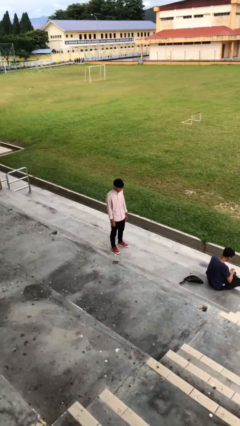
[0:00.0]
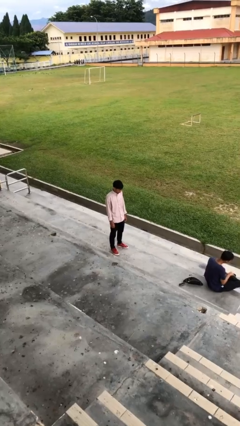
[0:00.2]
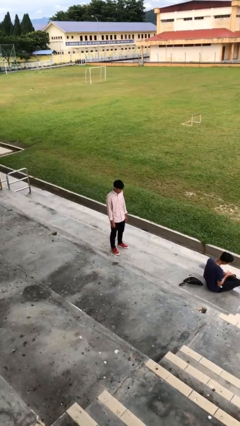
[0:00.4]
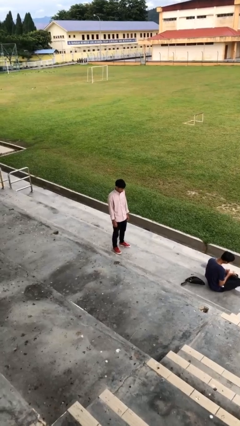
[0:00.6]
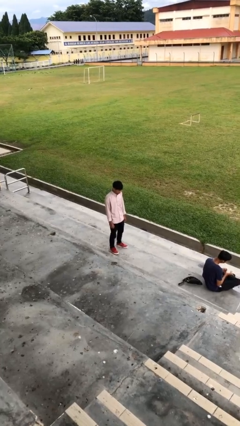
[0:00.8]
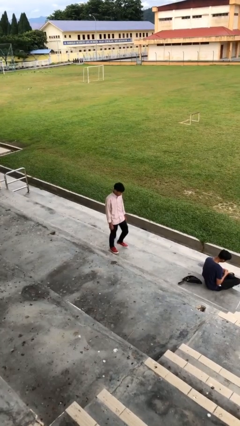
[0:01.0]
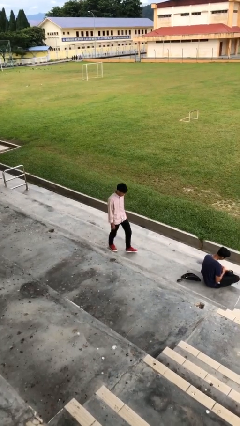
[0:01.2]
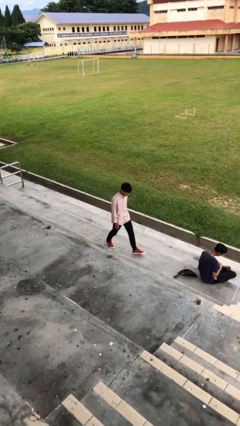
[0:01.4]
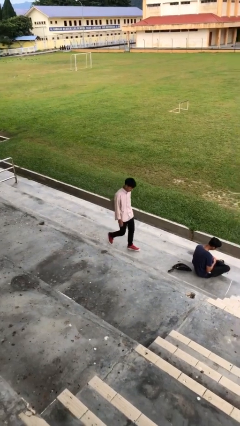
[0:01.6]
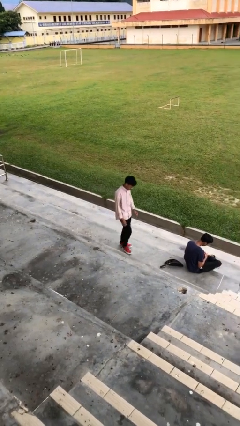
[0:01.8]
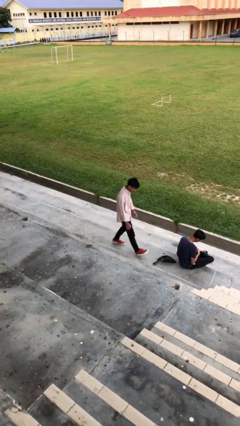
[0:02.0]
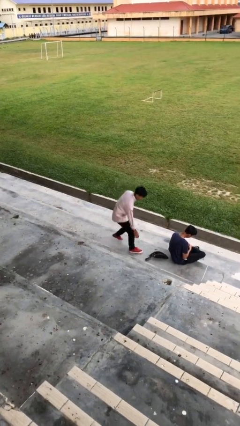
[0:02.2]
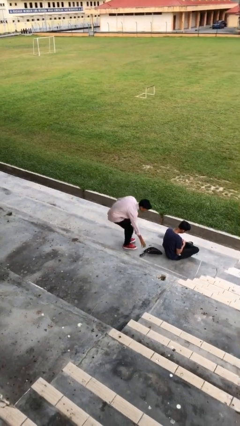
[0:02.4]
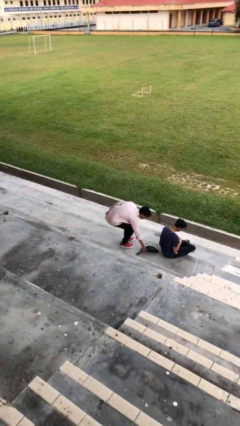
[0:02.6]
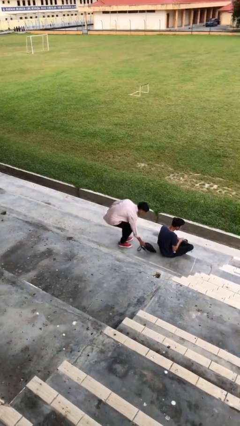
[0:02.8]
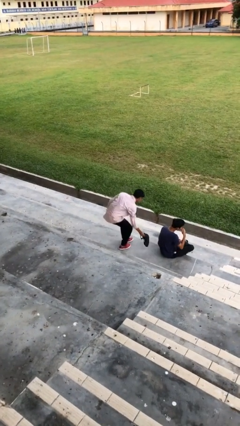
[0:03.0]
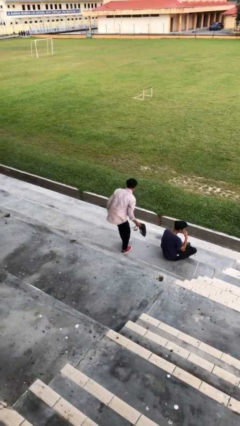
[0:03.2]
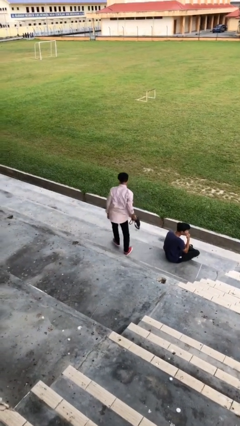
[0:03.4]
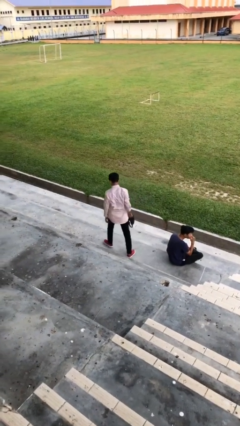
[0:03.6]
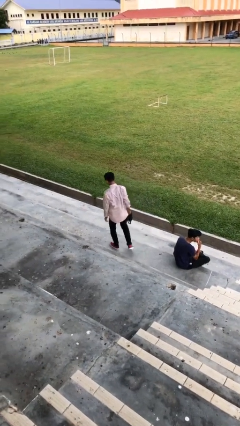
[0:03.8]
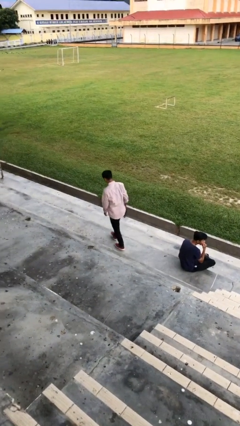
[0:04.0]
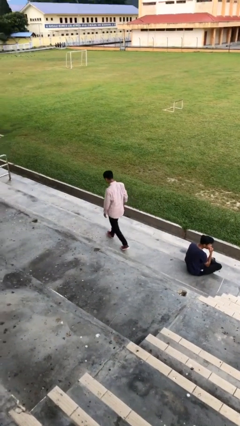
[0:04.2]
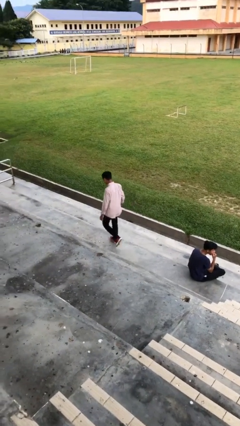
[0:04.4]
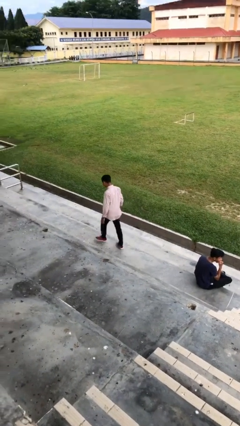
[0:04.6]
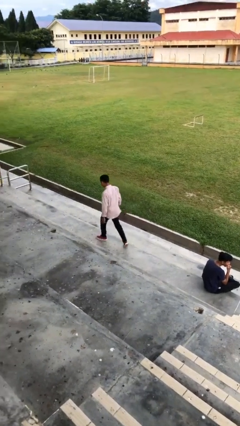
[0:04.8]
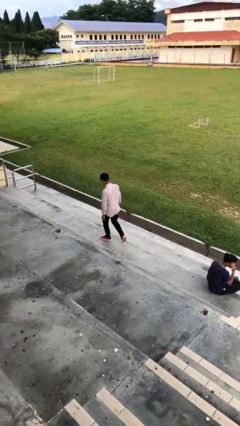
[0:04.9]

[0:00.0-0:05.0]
person steals object from person

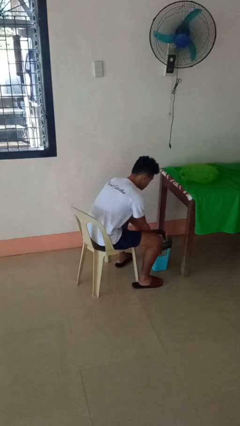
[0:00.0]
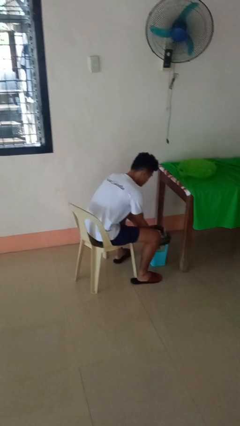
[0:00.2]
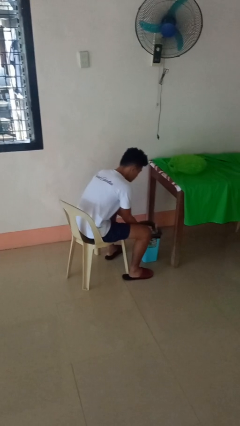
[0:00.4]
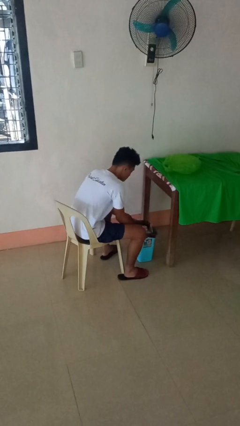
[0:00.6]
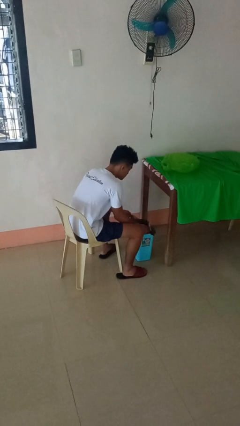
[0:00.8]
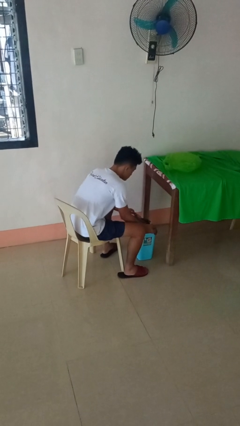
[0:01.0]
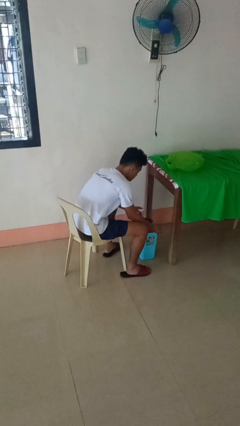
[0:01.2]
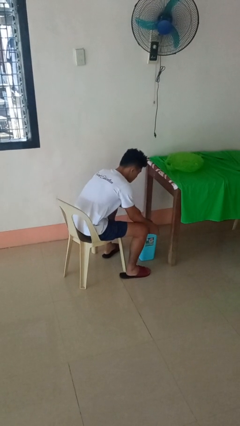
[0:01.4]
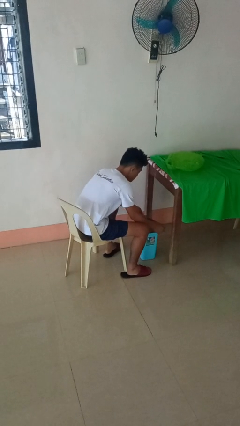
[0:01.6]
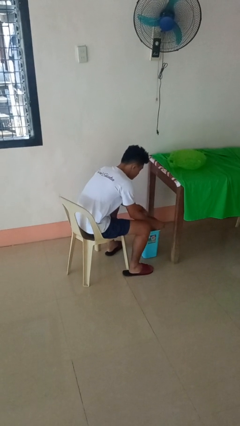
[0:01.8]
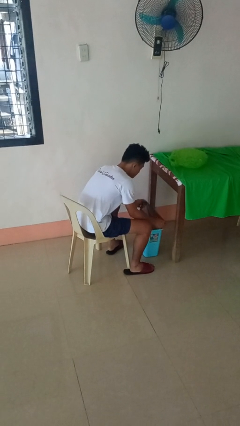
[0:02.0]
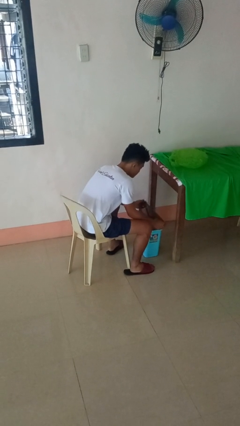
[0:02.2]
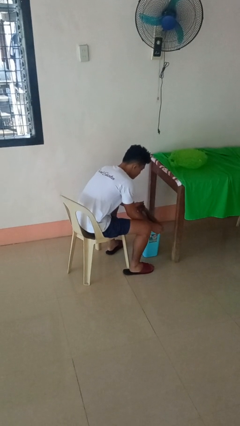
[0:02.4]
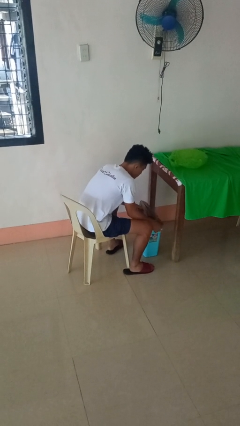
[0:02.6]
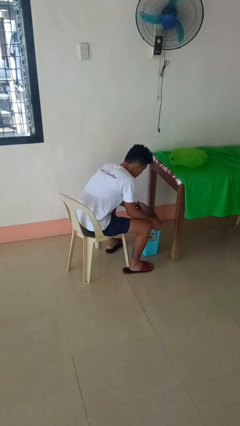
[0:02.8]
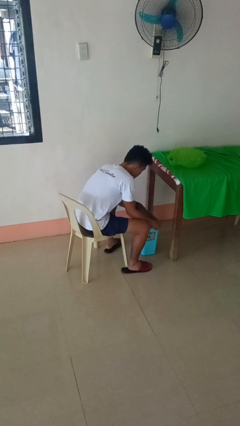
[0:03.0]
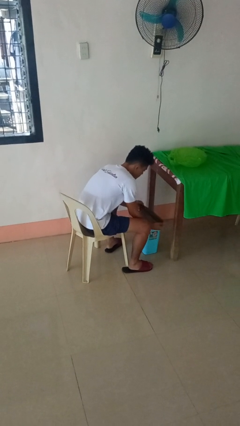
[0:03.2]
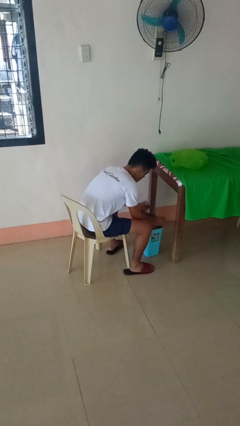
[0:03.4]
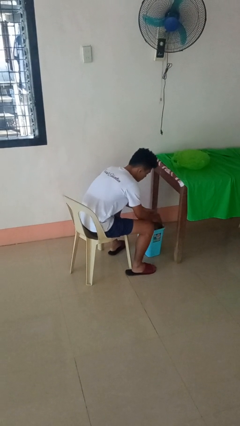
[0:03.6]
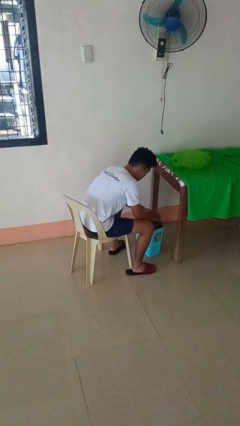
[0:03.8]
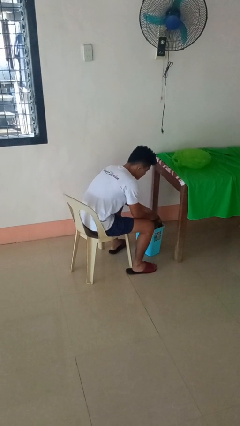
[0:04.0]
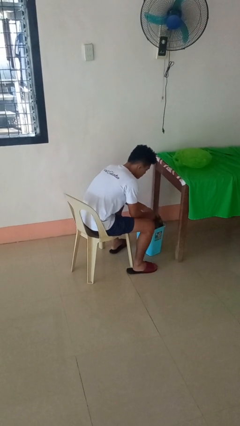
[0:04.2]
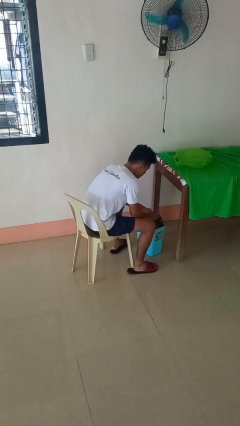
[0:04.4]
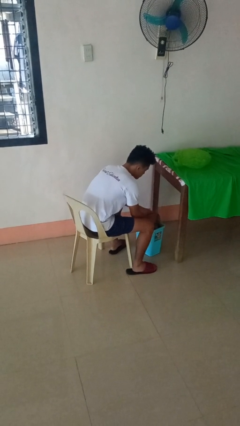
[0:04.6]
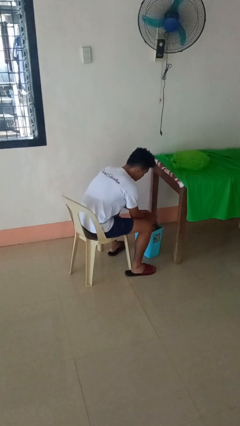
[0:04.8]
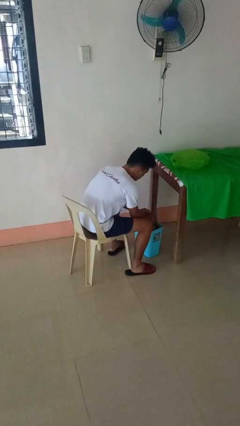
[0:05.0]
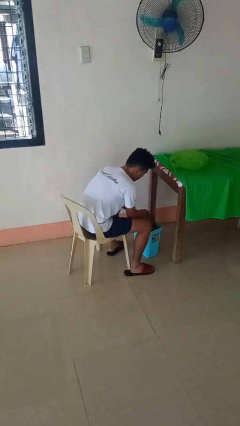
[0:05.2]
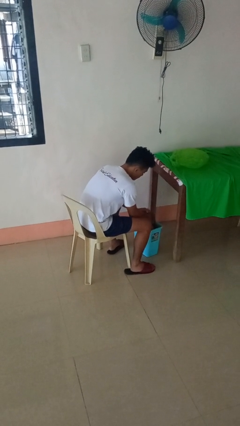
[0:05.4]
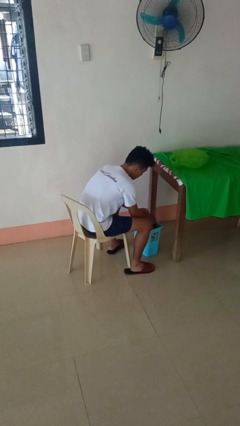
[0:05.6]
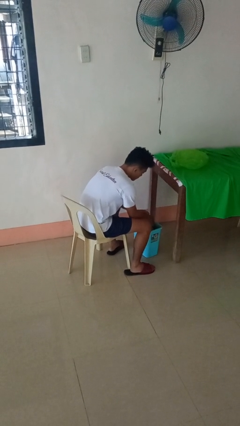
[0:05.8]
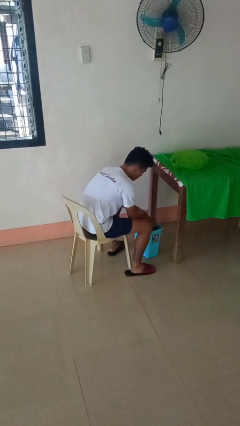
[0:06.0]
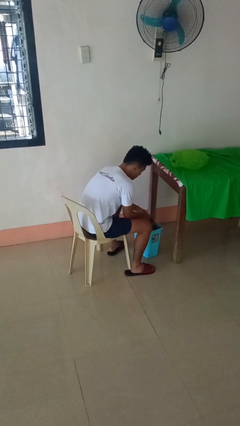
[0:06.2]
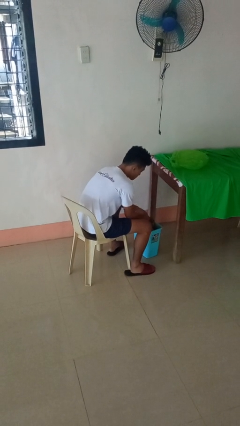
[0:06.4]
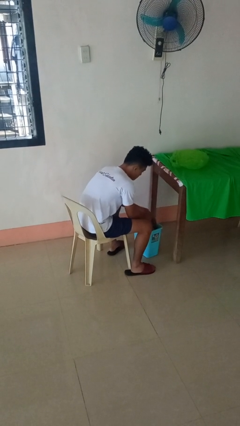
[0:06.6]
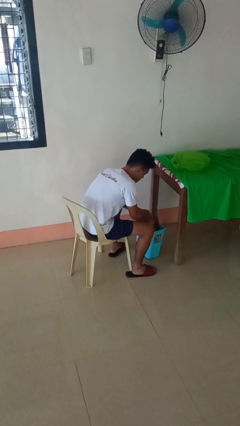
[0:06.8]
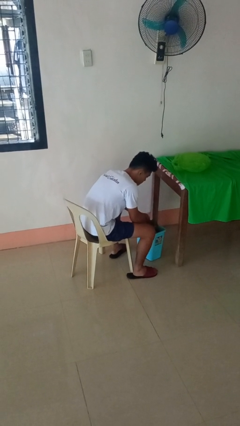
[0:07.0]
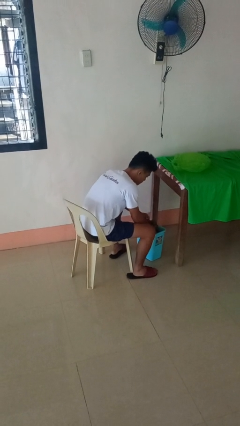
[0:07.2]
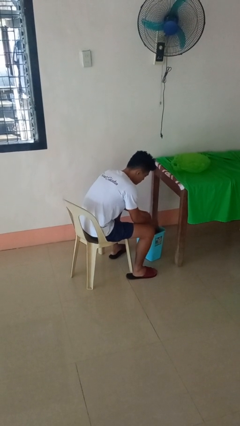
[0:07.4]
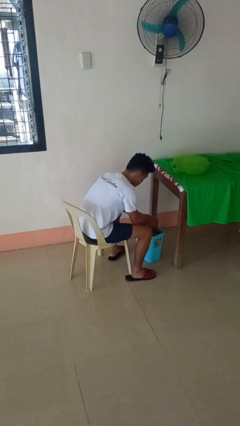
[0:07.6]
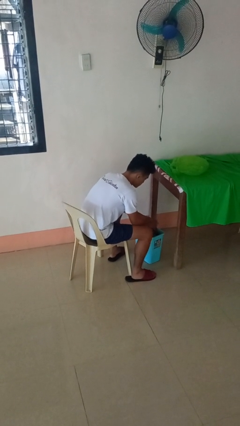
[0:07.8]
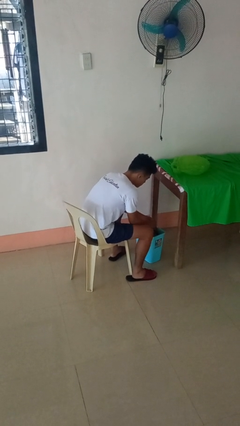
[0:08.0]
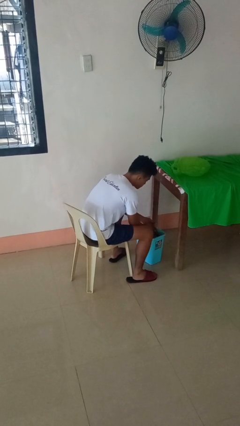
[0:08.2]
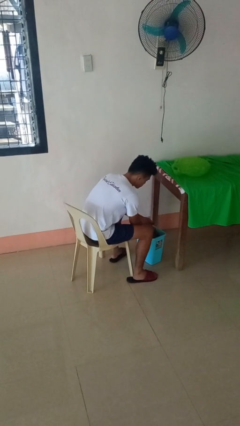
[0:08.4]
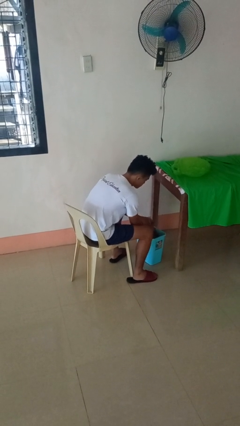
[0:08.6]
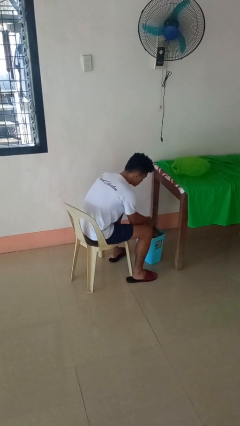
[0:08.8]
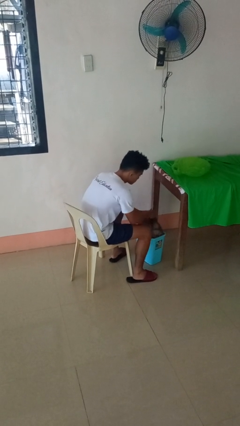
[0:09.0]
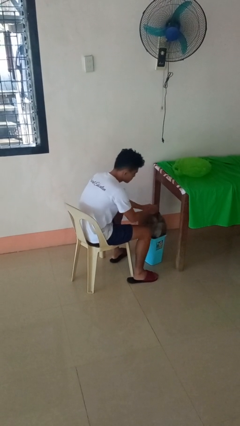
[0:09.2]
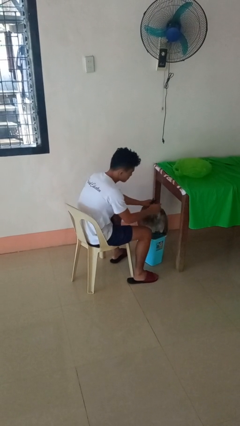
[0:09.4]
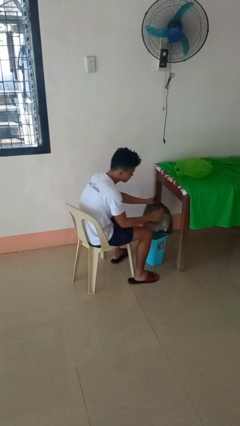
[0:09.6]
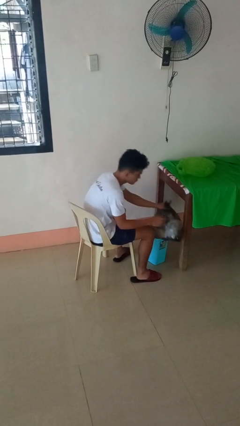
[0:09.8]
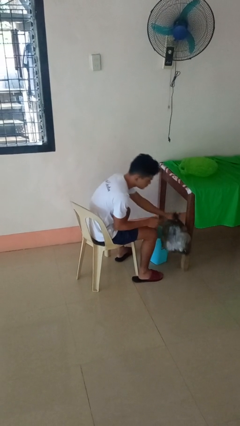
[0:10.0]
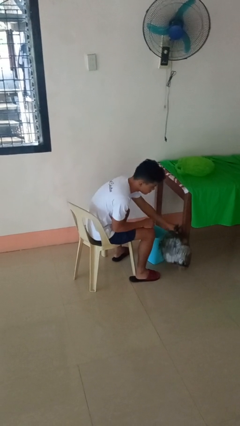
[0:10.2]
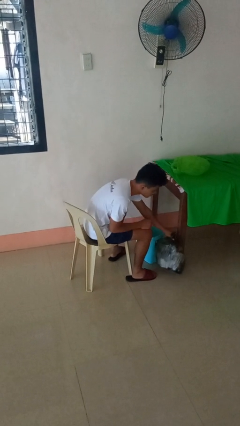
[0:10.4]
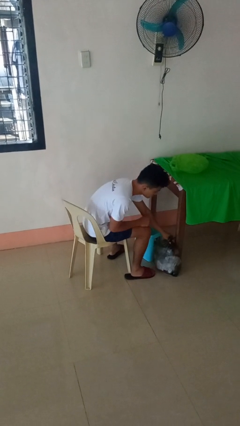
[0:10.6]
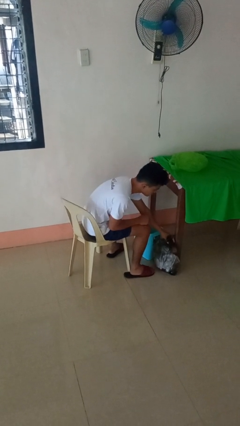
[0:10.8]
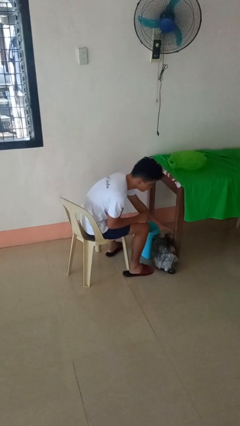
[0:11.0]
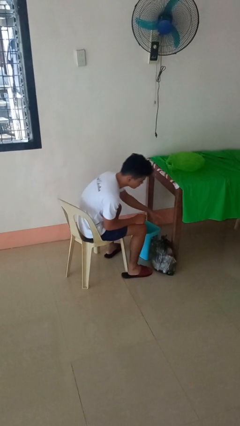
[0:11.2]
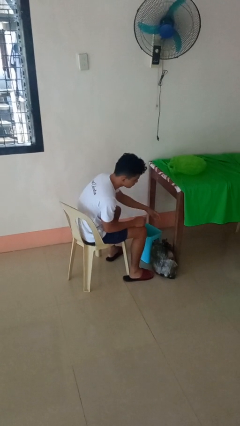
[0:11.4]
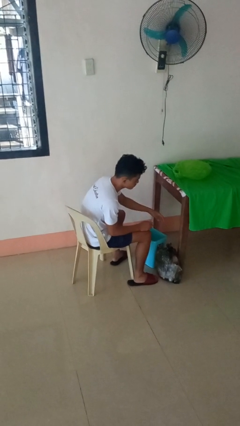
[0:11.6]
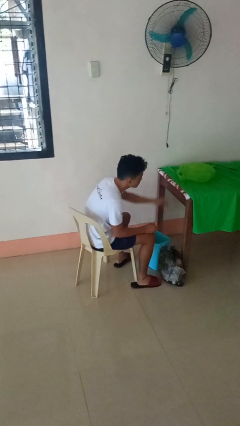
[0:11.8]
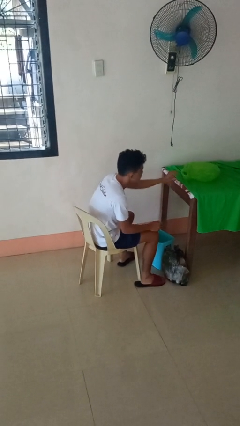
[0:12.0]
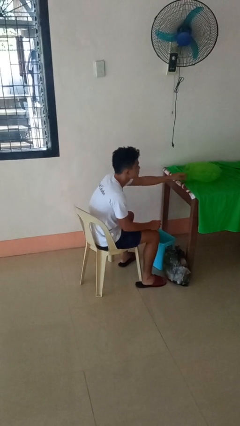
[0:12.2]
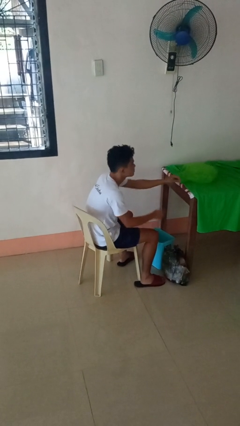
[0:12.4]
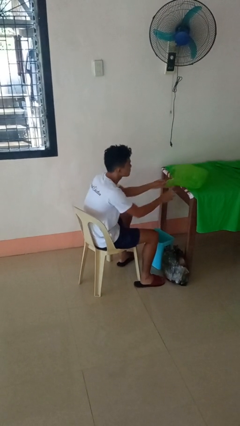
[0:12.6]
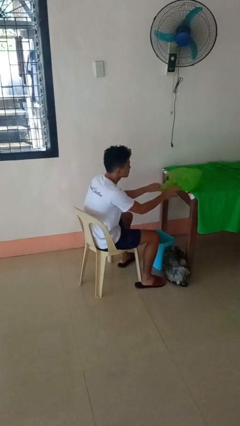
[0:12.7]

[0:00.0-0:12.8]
person removes trashbag from trashcan

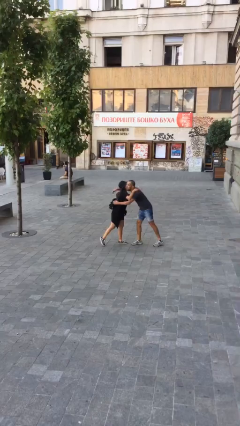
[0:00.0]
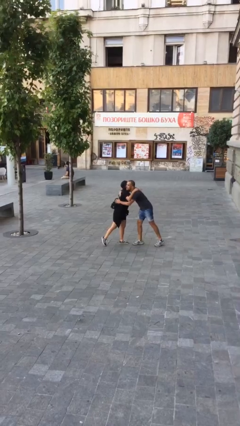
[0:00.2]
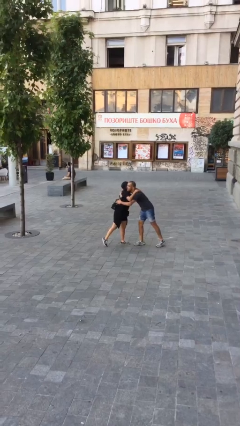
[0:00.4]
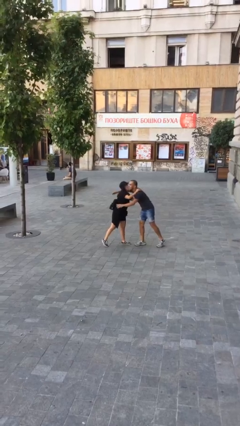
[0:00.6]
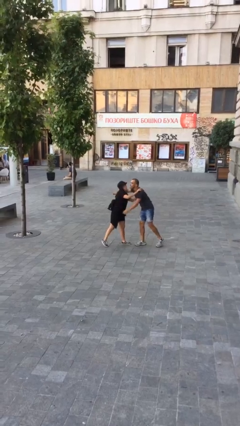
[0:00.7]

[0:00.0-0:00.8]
person embraces person
